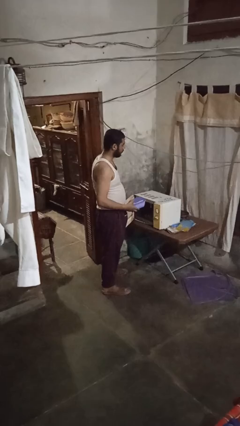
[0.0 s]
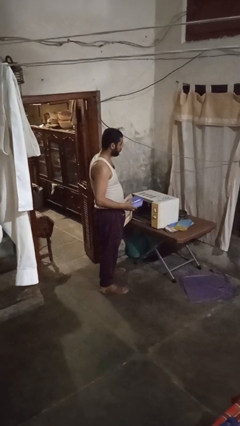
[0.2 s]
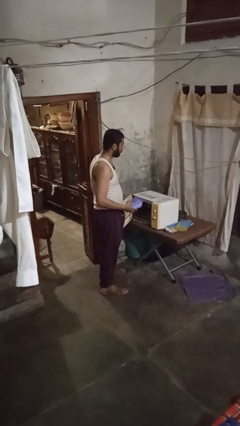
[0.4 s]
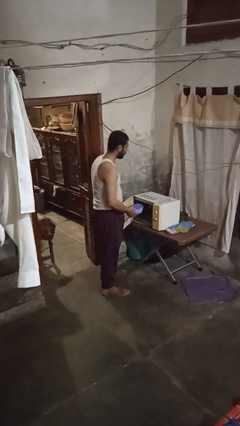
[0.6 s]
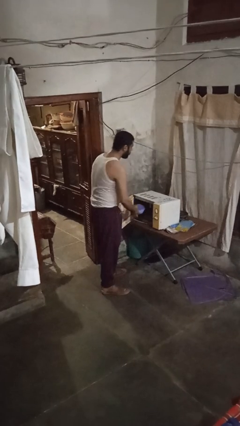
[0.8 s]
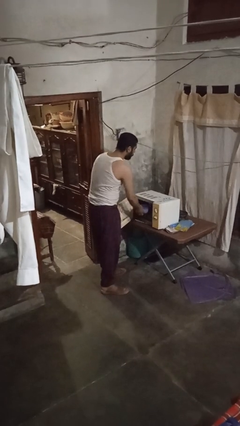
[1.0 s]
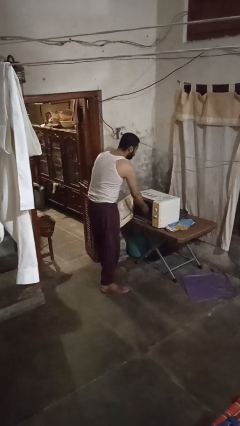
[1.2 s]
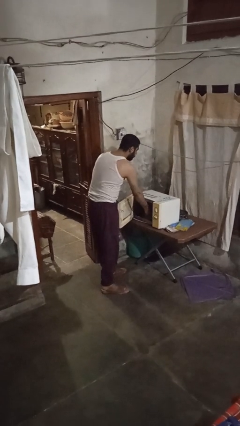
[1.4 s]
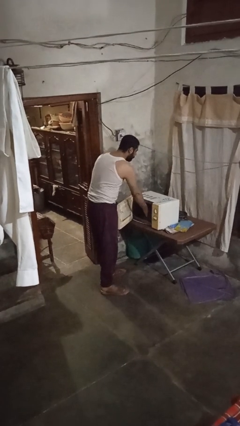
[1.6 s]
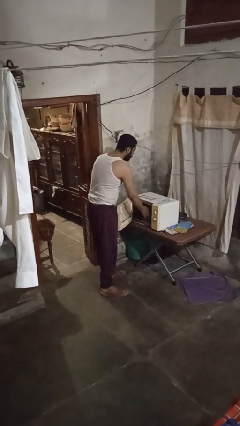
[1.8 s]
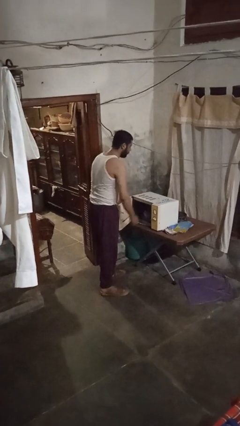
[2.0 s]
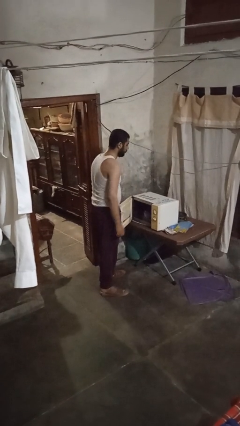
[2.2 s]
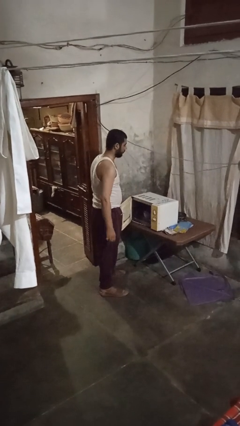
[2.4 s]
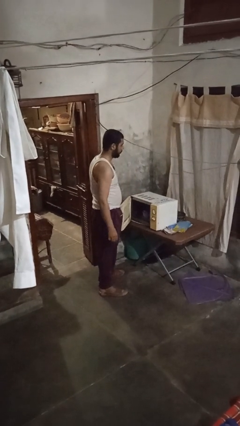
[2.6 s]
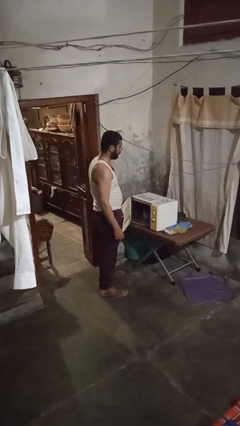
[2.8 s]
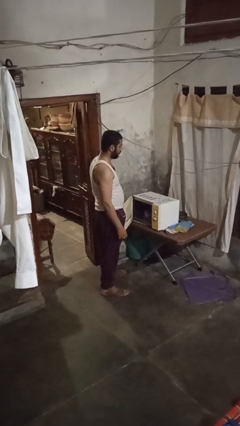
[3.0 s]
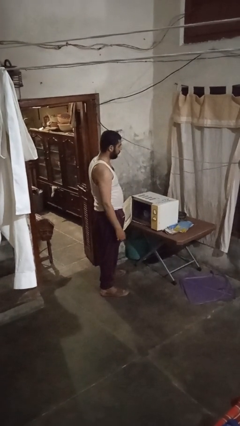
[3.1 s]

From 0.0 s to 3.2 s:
person puts object into microwave

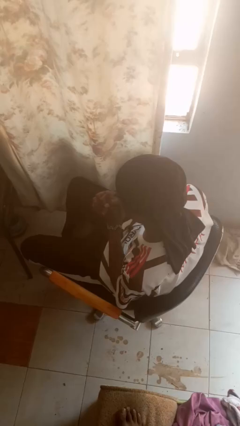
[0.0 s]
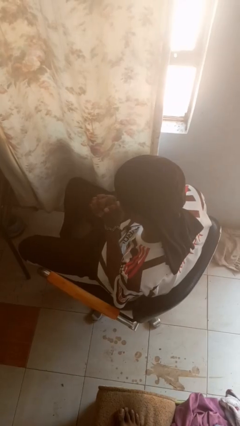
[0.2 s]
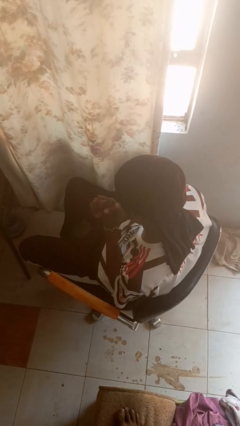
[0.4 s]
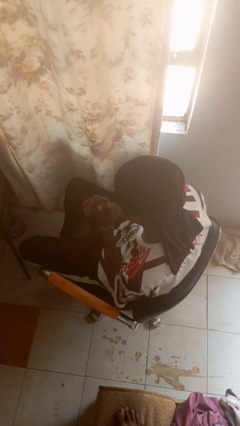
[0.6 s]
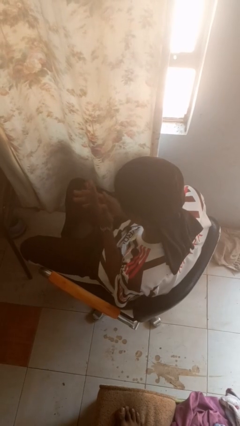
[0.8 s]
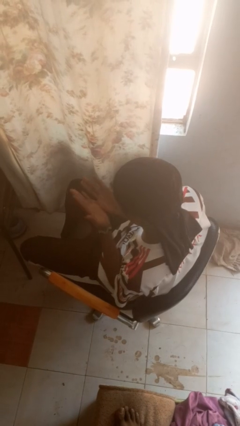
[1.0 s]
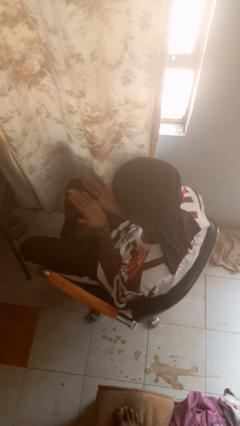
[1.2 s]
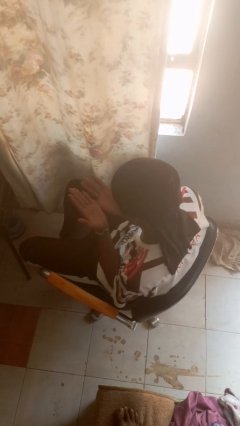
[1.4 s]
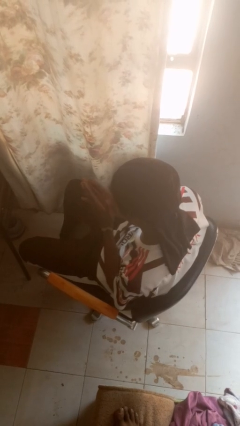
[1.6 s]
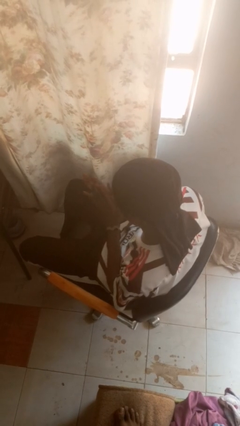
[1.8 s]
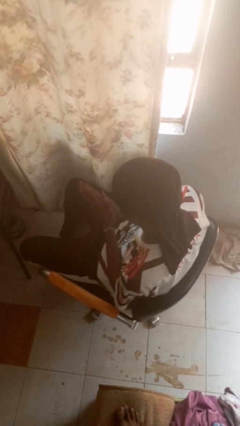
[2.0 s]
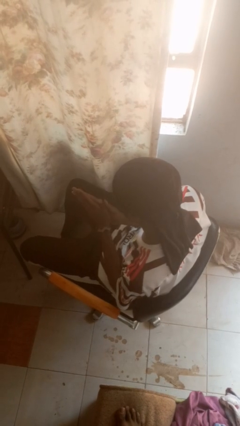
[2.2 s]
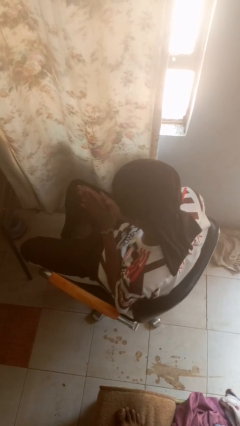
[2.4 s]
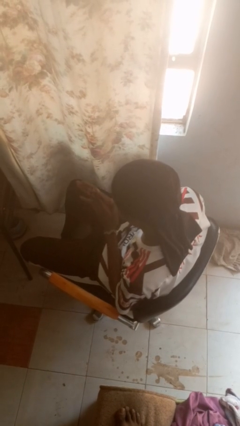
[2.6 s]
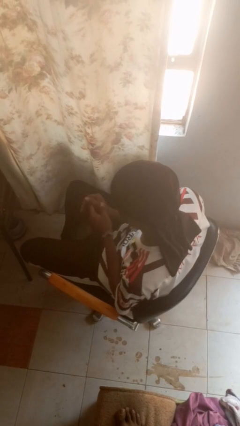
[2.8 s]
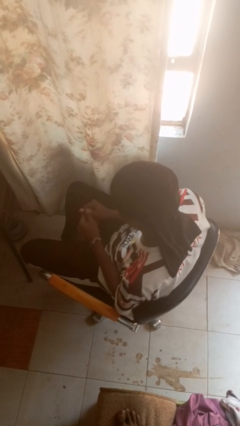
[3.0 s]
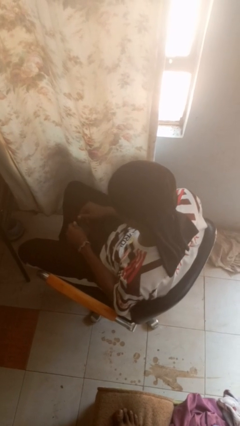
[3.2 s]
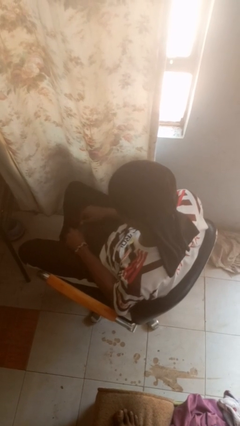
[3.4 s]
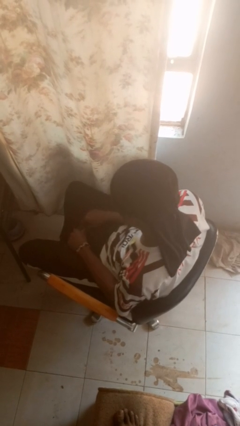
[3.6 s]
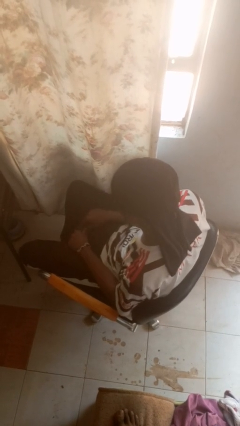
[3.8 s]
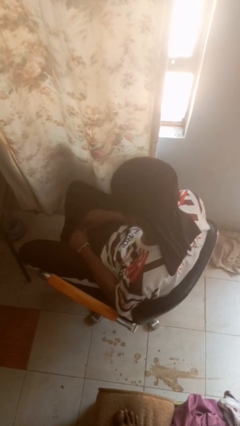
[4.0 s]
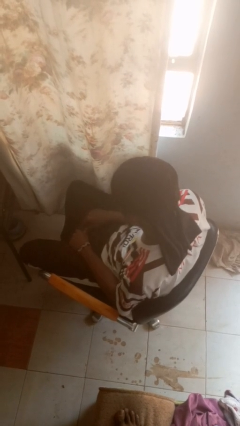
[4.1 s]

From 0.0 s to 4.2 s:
person looks at hands in lap

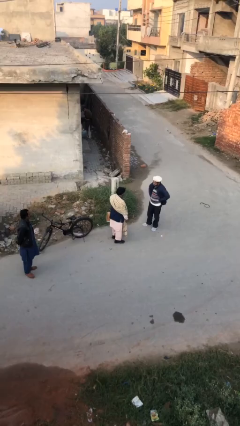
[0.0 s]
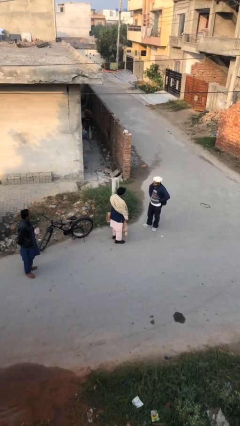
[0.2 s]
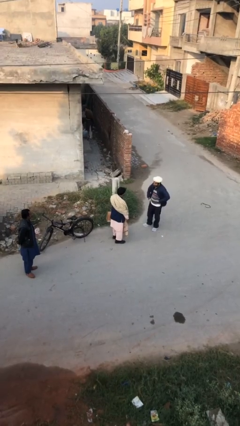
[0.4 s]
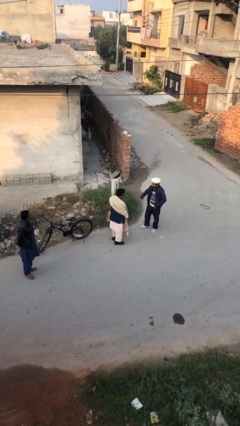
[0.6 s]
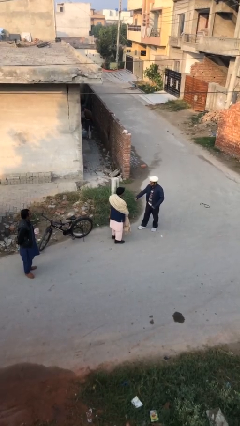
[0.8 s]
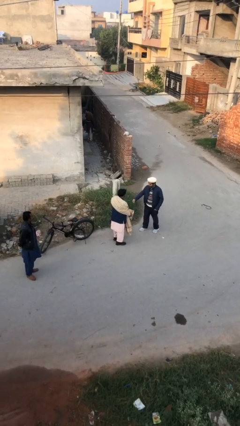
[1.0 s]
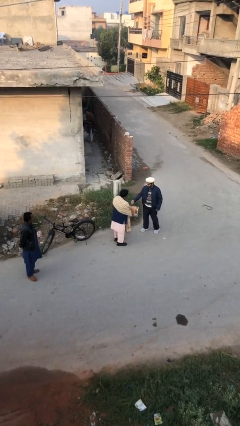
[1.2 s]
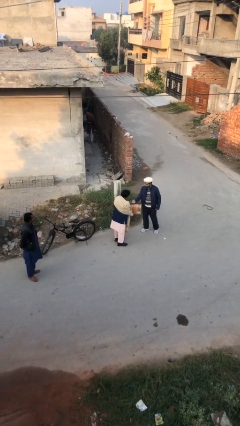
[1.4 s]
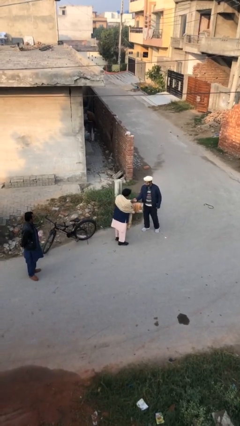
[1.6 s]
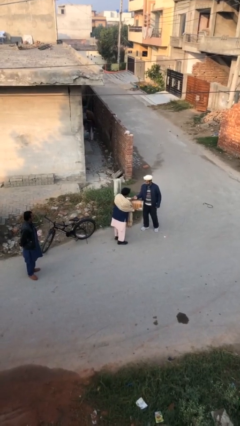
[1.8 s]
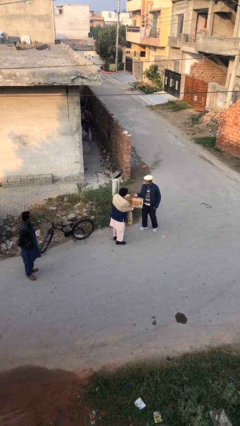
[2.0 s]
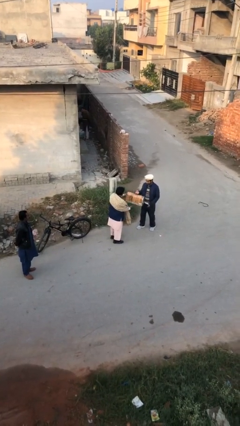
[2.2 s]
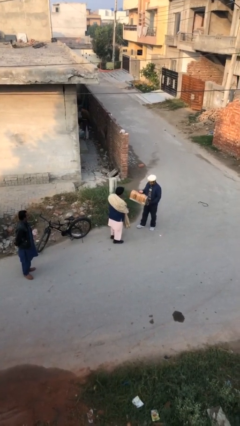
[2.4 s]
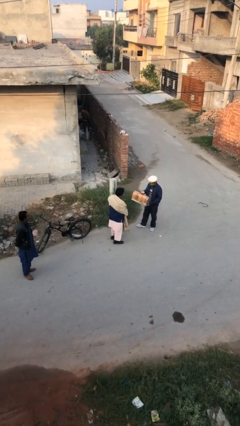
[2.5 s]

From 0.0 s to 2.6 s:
person transfers object to person

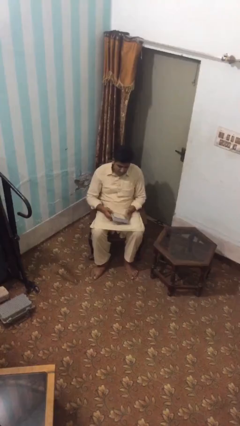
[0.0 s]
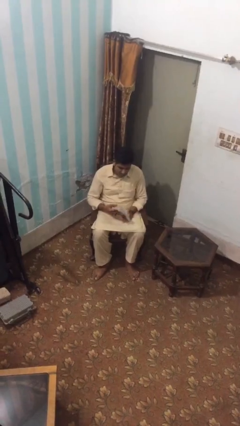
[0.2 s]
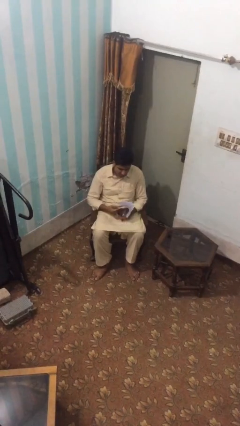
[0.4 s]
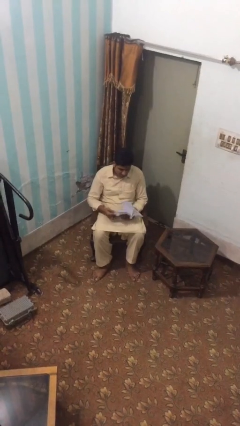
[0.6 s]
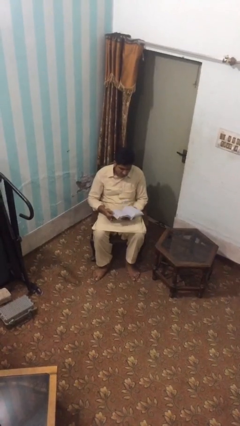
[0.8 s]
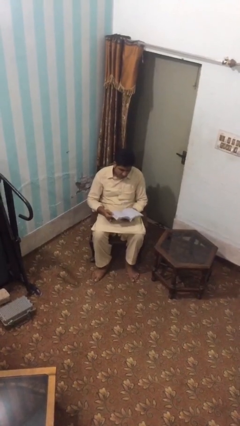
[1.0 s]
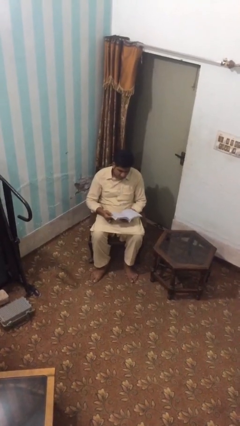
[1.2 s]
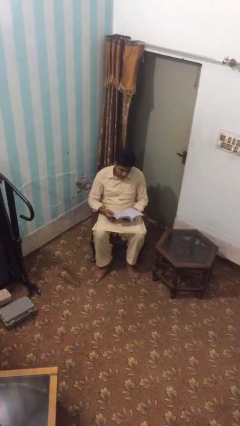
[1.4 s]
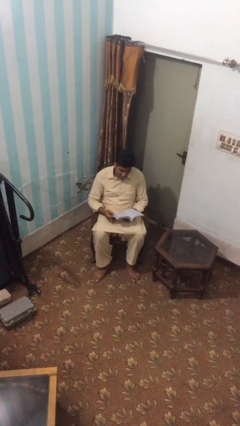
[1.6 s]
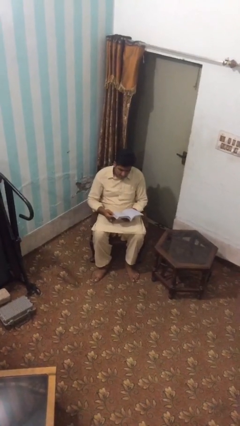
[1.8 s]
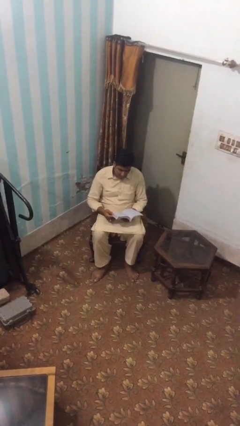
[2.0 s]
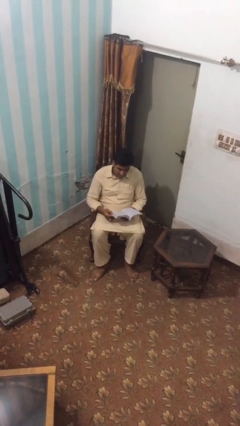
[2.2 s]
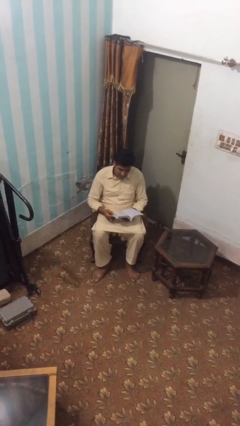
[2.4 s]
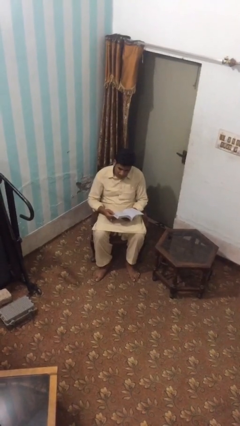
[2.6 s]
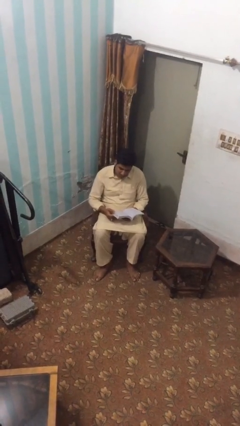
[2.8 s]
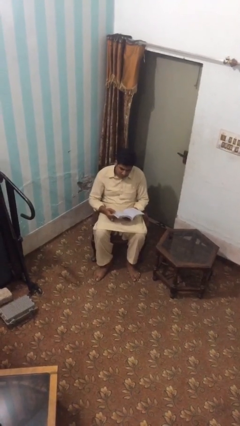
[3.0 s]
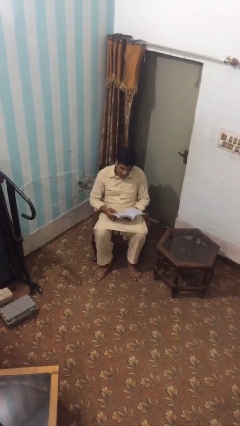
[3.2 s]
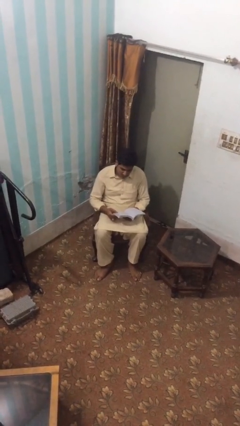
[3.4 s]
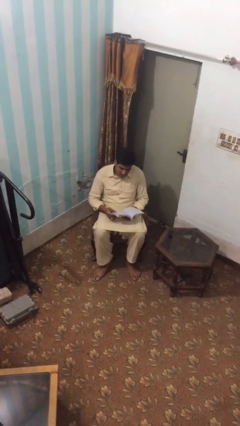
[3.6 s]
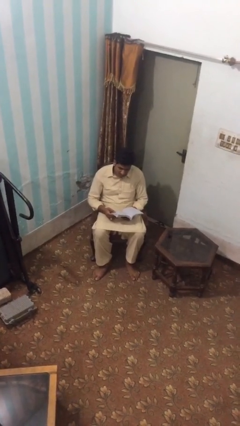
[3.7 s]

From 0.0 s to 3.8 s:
person reads document

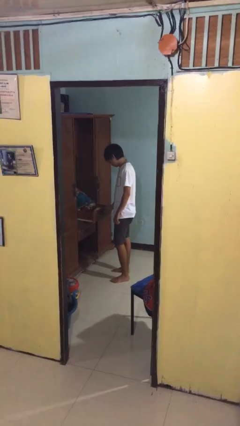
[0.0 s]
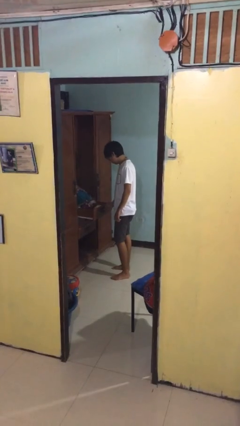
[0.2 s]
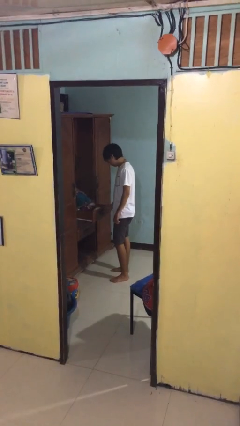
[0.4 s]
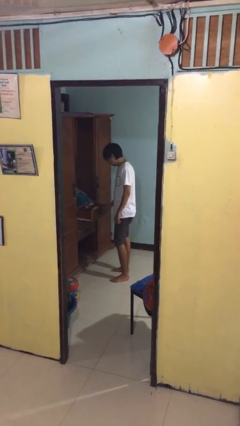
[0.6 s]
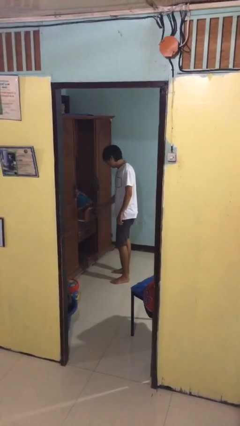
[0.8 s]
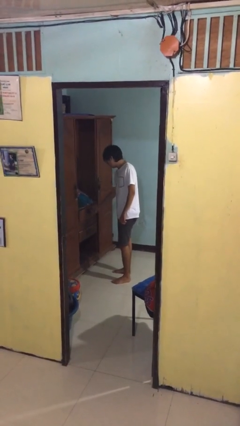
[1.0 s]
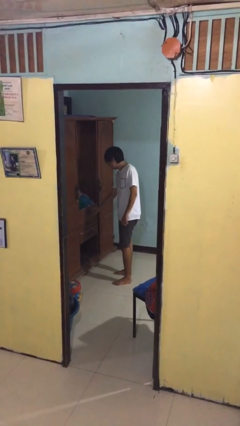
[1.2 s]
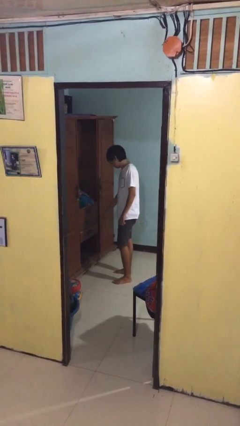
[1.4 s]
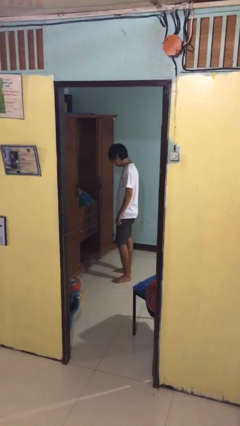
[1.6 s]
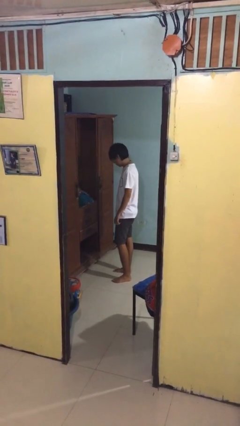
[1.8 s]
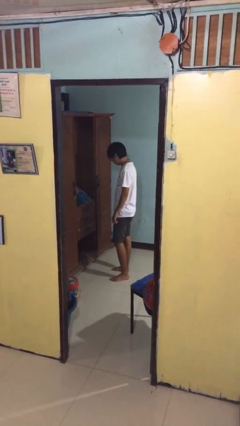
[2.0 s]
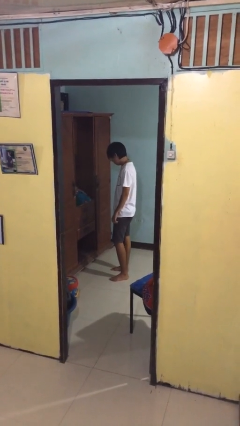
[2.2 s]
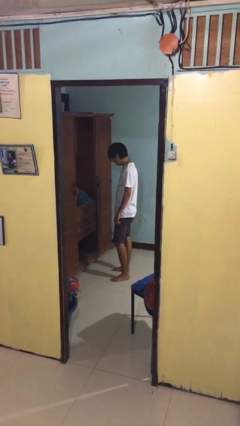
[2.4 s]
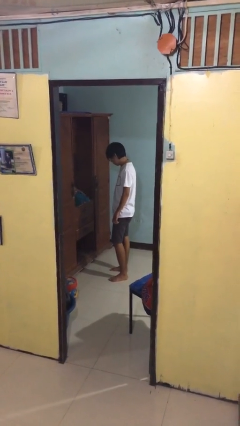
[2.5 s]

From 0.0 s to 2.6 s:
person closes dresser drawer

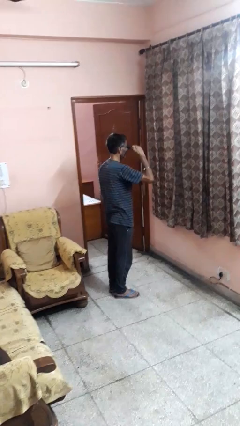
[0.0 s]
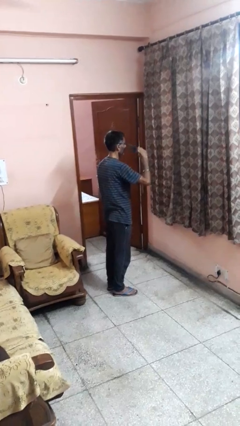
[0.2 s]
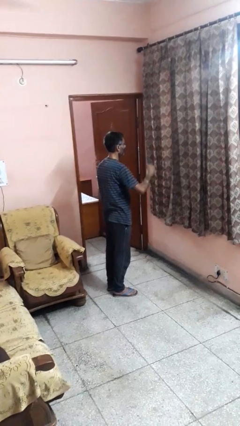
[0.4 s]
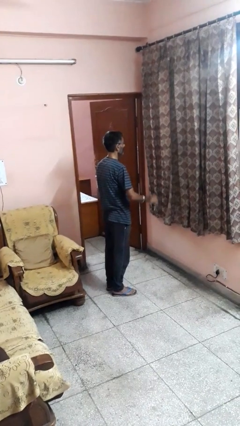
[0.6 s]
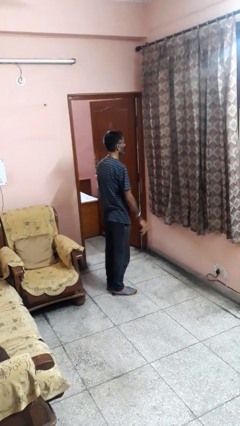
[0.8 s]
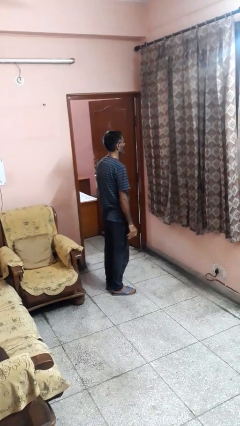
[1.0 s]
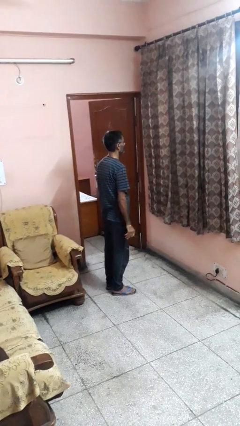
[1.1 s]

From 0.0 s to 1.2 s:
person takes off sunglasses

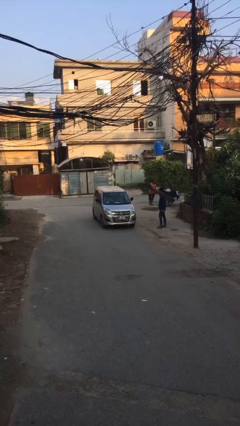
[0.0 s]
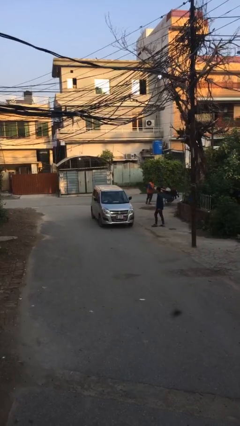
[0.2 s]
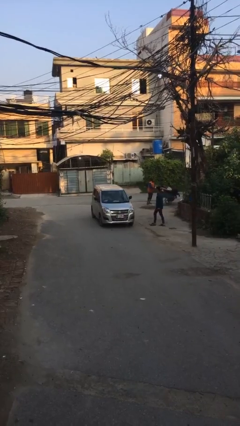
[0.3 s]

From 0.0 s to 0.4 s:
car picks up person
